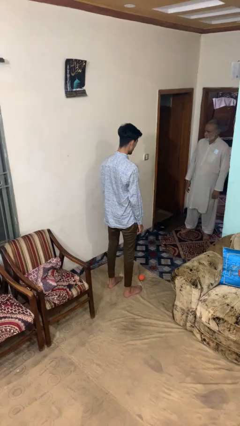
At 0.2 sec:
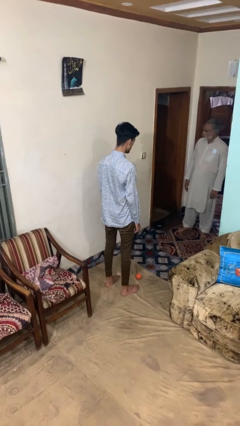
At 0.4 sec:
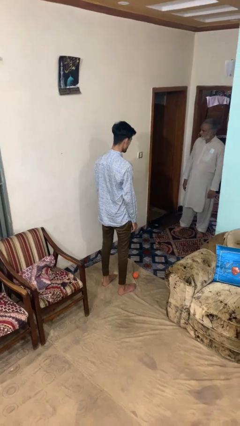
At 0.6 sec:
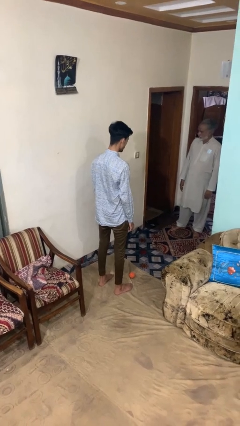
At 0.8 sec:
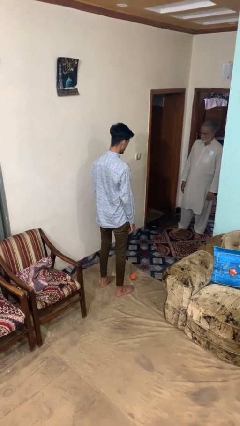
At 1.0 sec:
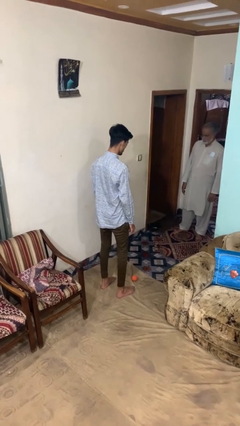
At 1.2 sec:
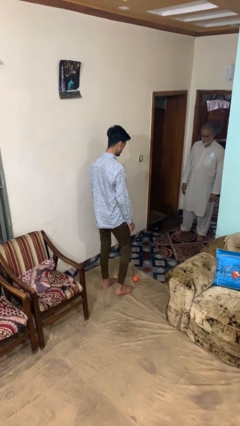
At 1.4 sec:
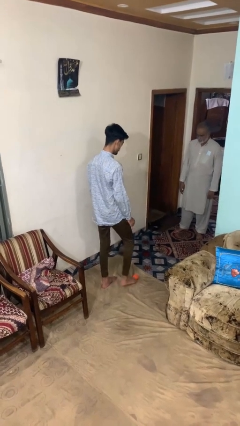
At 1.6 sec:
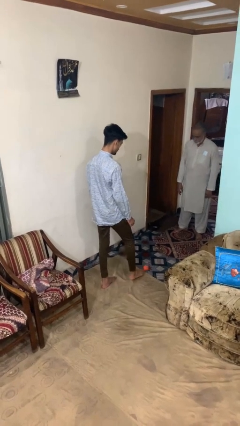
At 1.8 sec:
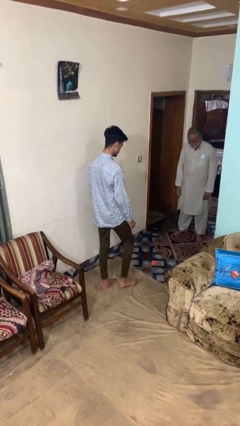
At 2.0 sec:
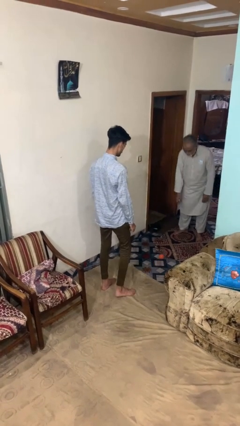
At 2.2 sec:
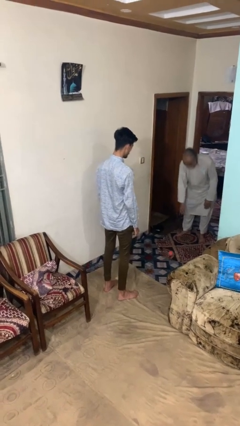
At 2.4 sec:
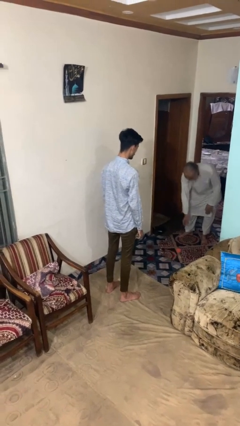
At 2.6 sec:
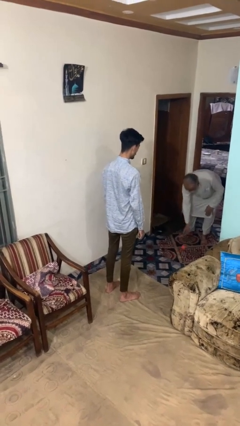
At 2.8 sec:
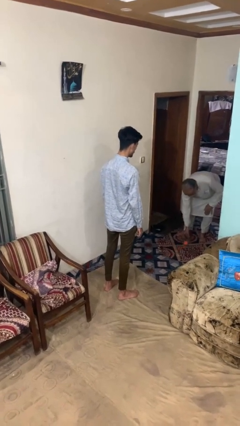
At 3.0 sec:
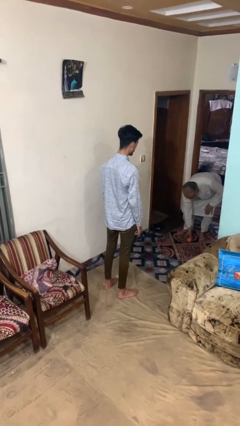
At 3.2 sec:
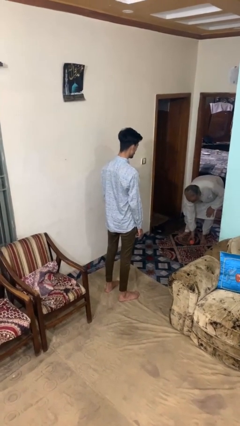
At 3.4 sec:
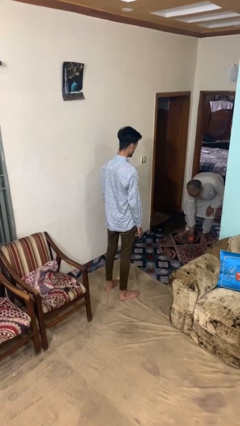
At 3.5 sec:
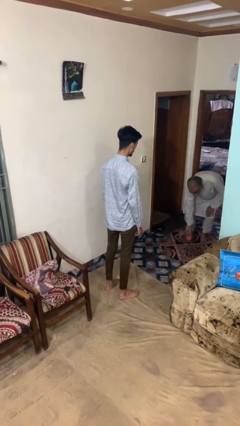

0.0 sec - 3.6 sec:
person kicks object to person

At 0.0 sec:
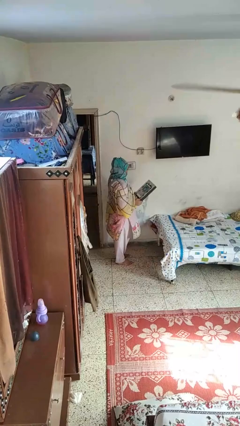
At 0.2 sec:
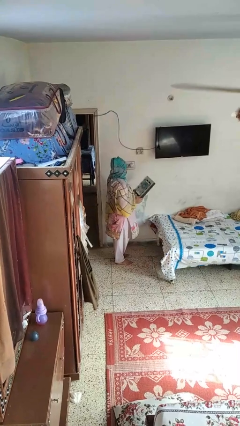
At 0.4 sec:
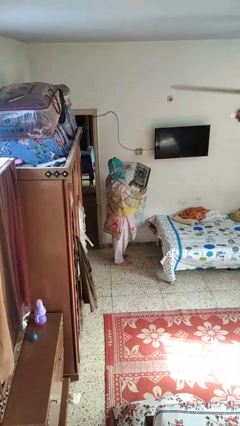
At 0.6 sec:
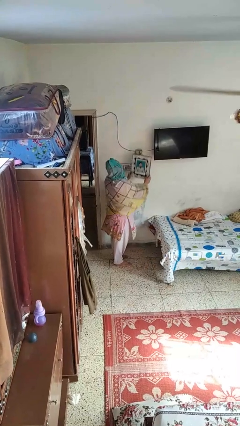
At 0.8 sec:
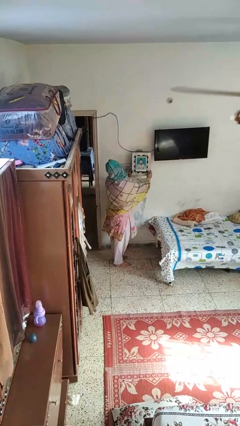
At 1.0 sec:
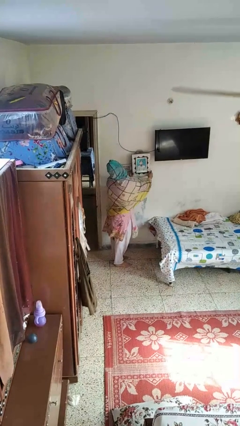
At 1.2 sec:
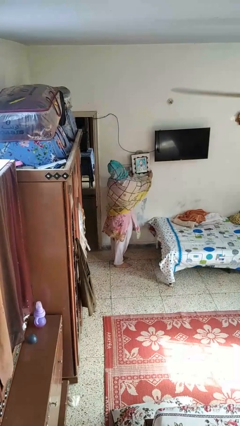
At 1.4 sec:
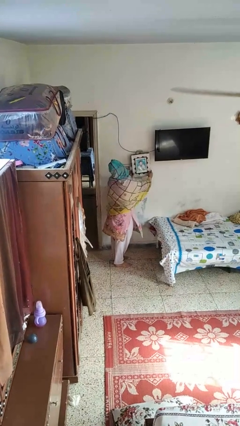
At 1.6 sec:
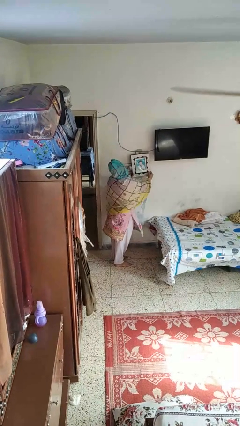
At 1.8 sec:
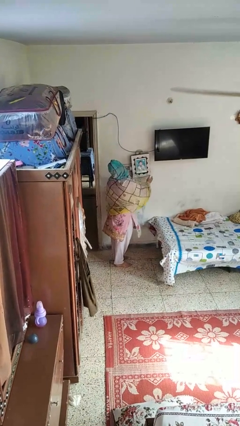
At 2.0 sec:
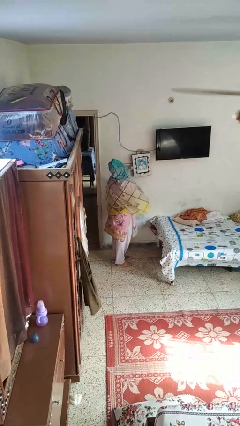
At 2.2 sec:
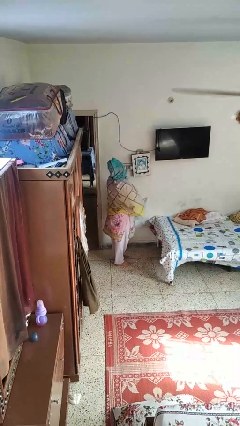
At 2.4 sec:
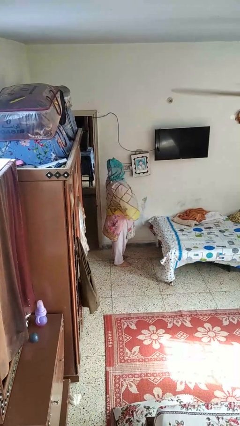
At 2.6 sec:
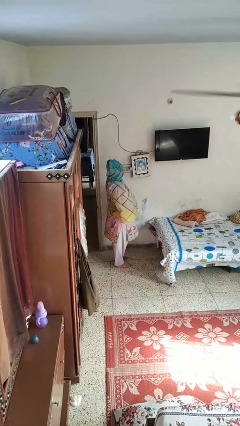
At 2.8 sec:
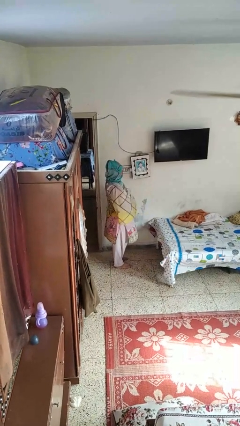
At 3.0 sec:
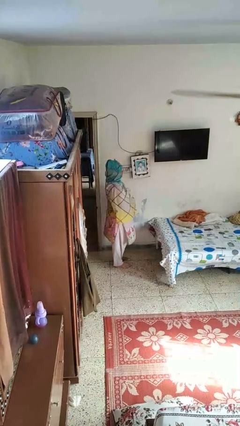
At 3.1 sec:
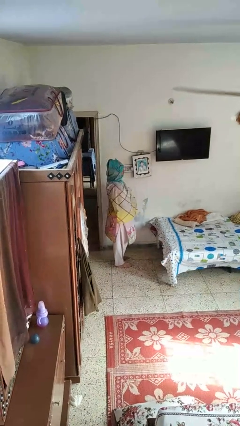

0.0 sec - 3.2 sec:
person puts up picture frame

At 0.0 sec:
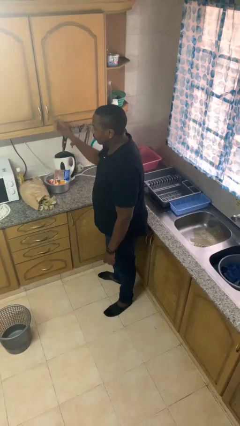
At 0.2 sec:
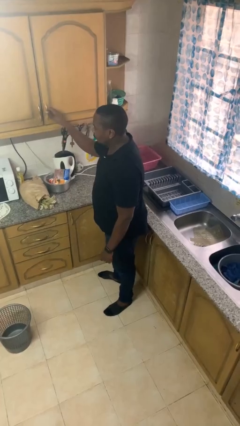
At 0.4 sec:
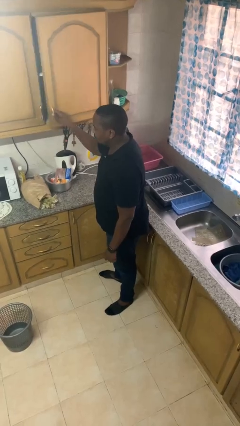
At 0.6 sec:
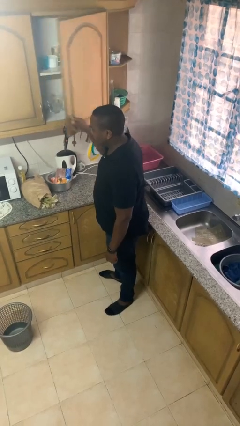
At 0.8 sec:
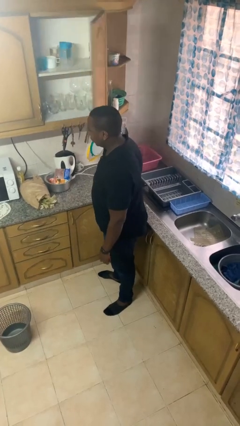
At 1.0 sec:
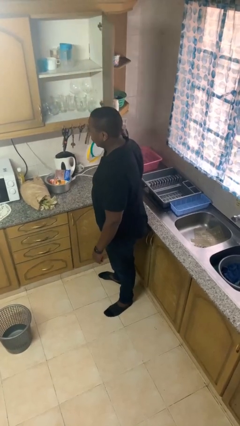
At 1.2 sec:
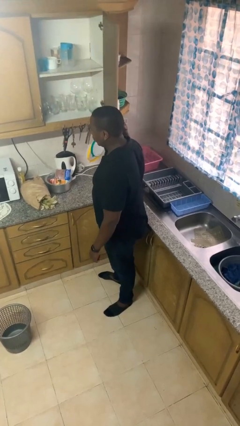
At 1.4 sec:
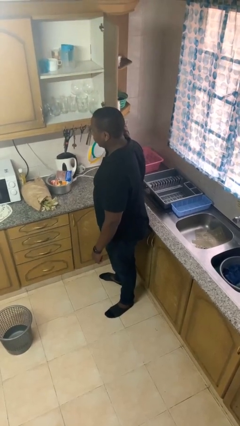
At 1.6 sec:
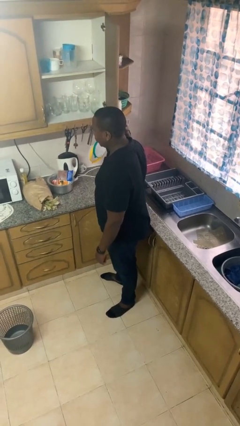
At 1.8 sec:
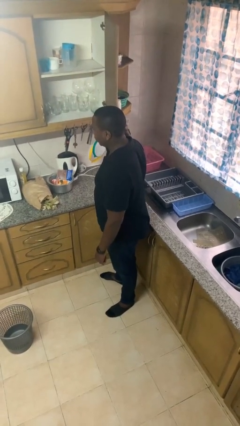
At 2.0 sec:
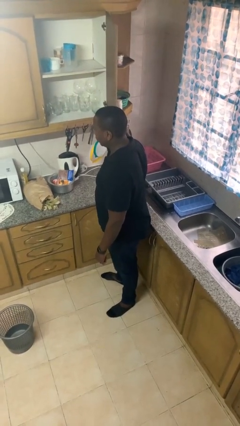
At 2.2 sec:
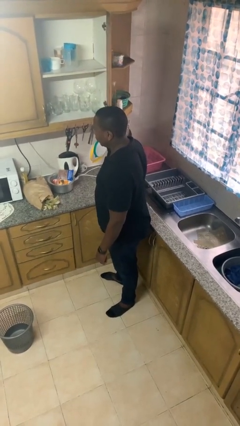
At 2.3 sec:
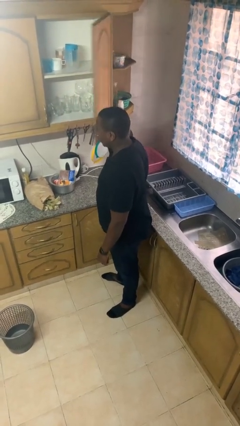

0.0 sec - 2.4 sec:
person opens cabinet

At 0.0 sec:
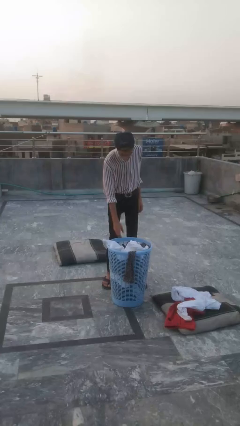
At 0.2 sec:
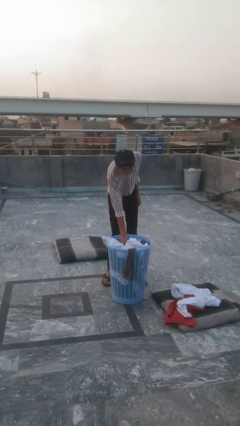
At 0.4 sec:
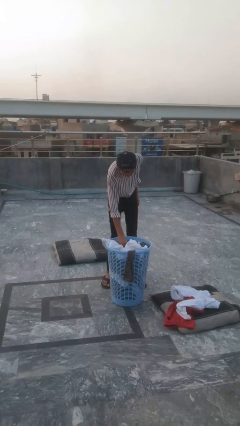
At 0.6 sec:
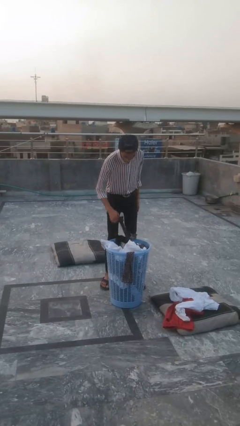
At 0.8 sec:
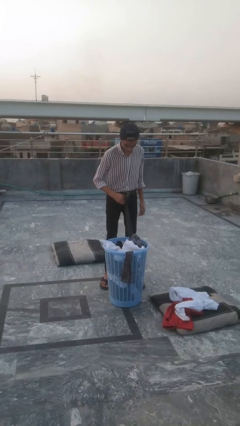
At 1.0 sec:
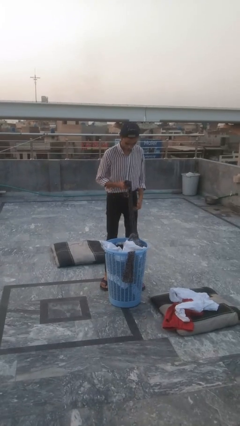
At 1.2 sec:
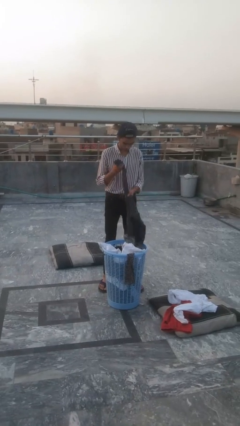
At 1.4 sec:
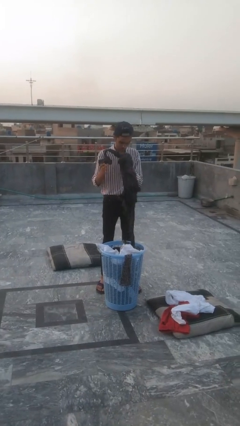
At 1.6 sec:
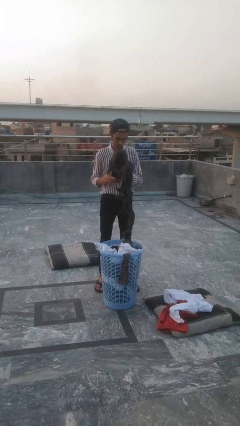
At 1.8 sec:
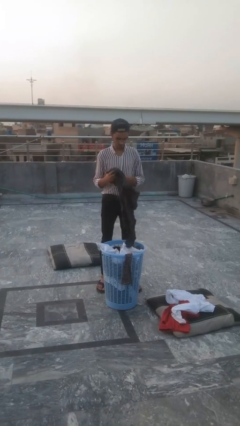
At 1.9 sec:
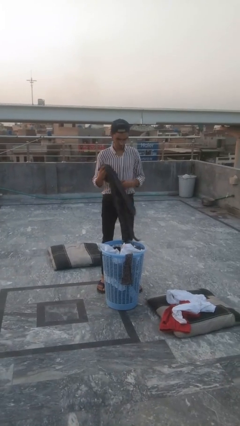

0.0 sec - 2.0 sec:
person takes object from basket

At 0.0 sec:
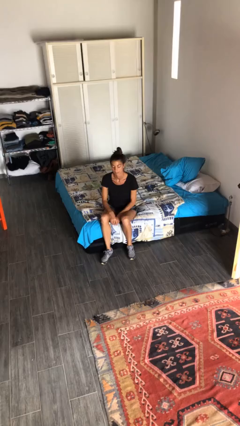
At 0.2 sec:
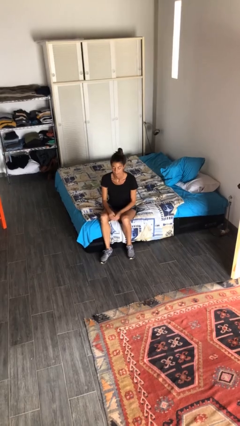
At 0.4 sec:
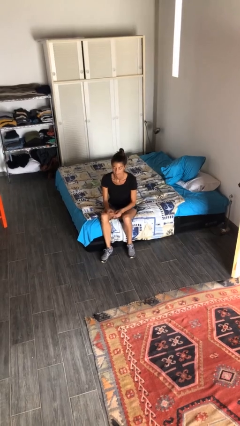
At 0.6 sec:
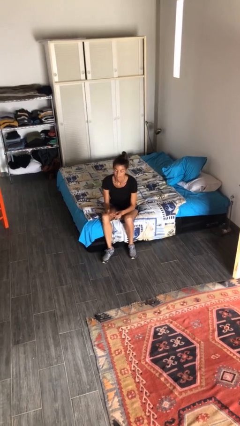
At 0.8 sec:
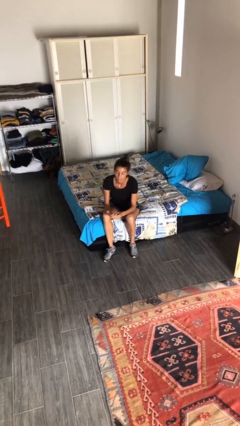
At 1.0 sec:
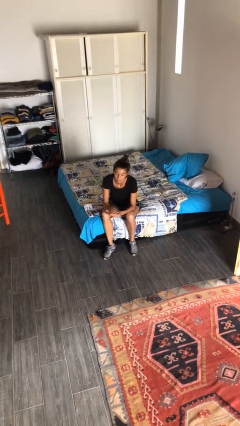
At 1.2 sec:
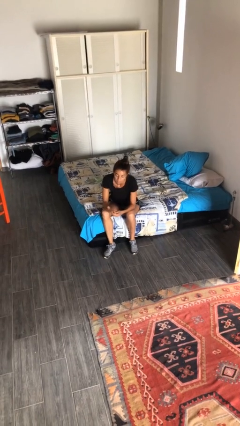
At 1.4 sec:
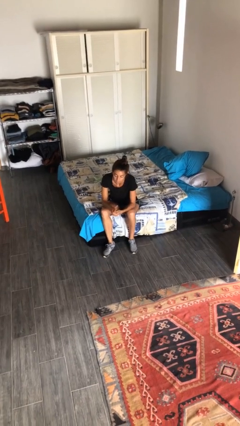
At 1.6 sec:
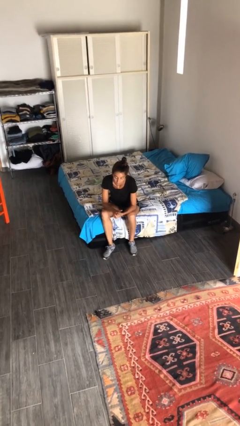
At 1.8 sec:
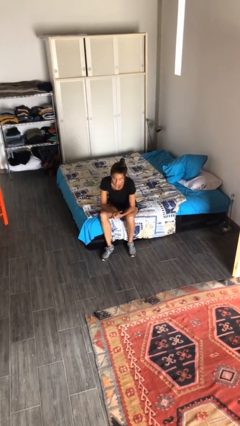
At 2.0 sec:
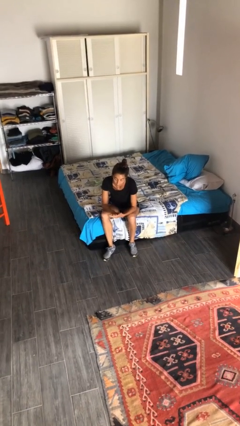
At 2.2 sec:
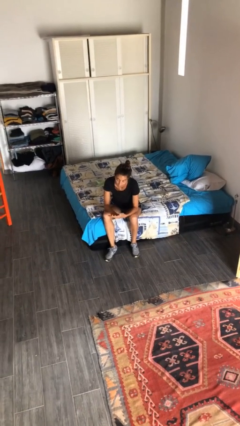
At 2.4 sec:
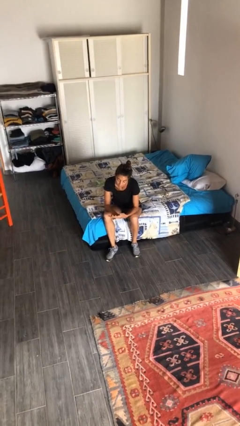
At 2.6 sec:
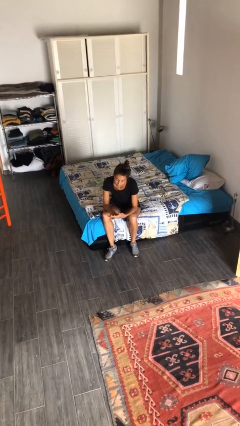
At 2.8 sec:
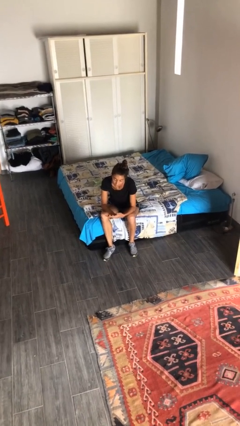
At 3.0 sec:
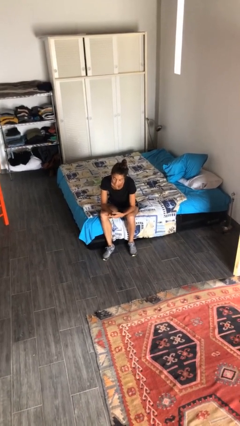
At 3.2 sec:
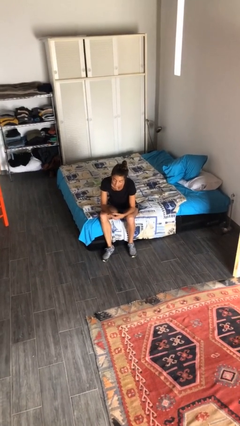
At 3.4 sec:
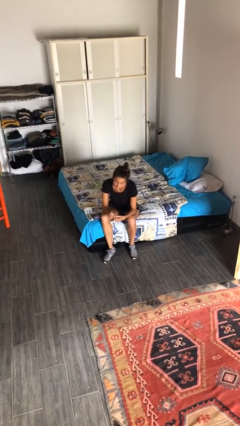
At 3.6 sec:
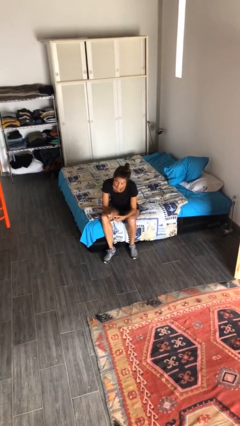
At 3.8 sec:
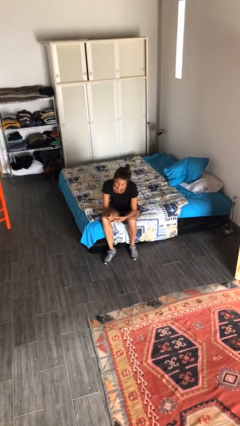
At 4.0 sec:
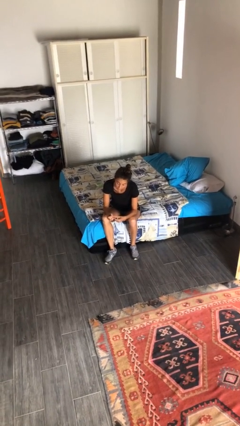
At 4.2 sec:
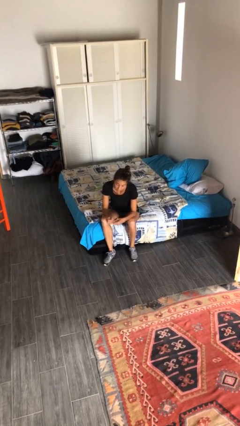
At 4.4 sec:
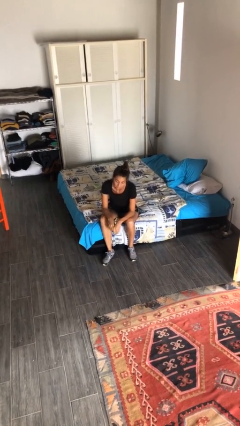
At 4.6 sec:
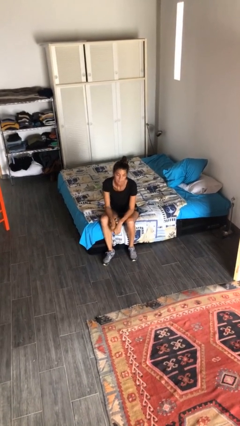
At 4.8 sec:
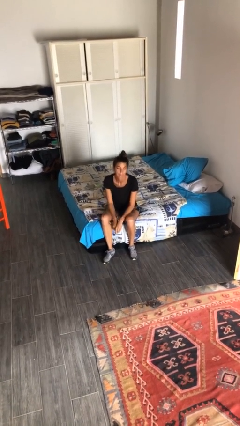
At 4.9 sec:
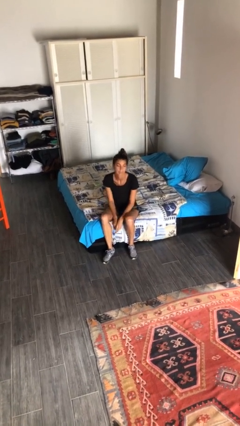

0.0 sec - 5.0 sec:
person looks at hands in lap

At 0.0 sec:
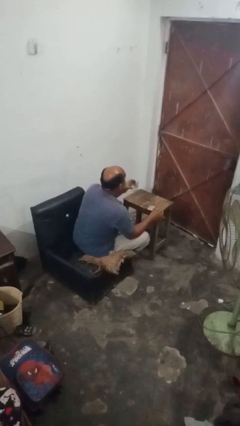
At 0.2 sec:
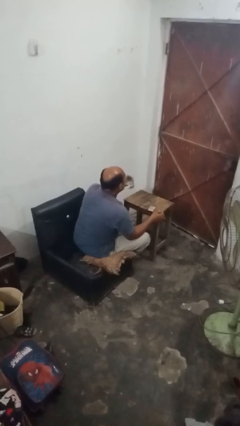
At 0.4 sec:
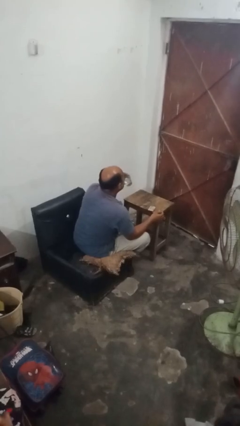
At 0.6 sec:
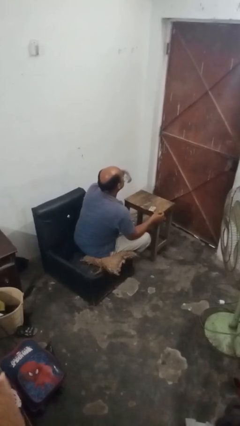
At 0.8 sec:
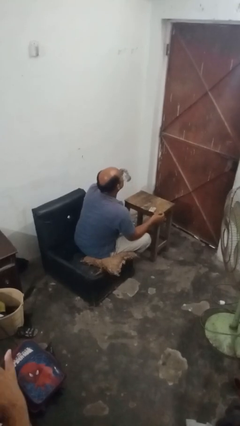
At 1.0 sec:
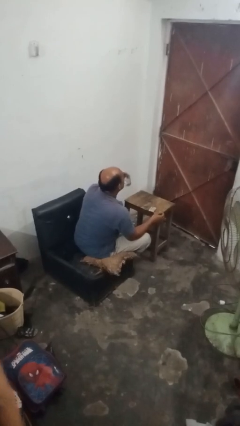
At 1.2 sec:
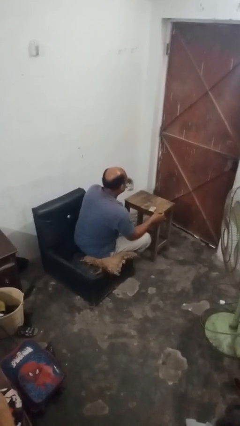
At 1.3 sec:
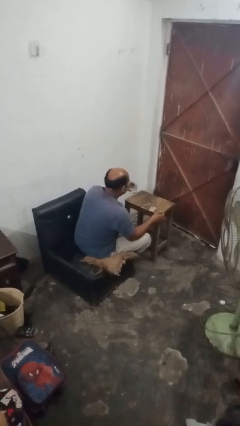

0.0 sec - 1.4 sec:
person drinks from cup
